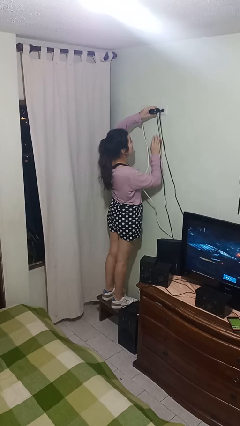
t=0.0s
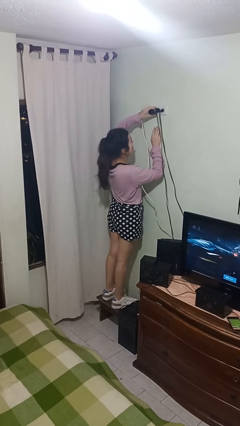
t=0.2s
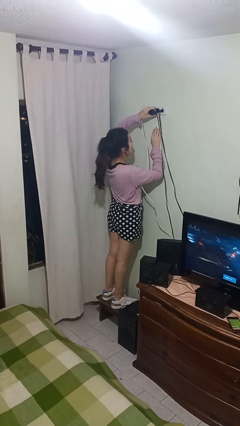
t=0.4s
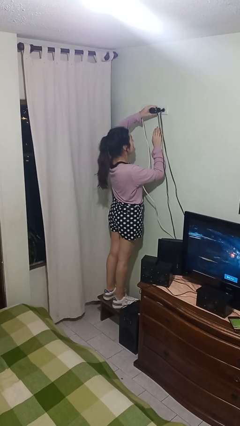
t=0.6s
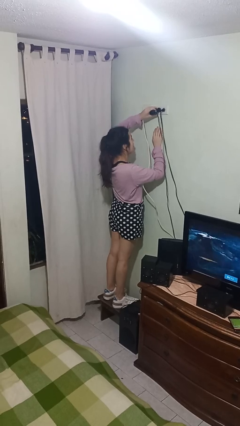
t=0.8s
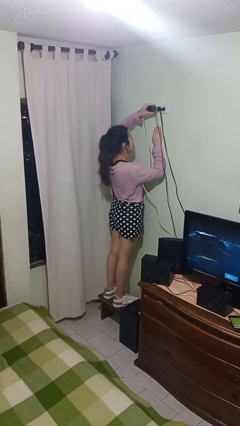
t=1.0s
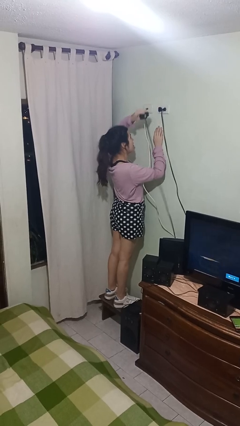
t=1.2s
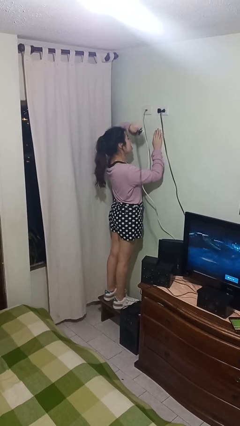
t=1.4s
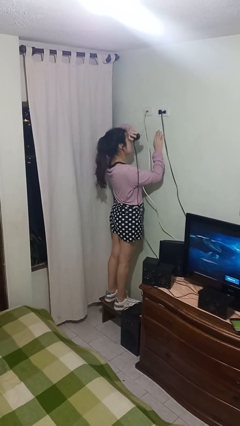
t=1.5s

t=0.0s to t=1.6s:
person unplugs from electrical socket

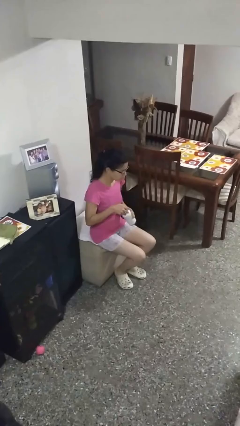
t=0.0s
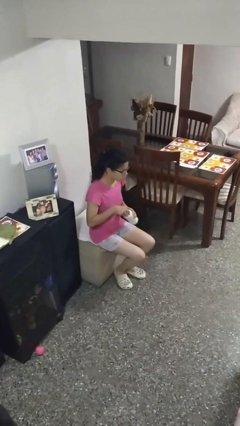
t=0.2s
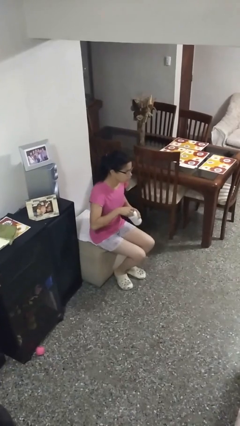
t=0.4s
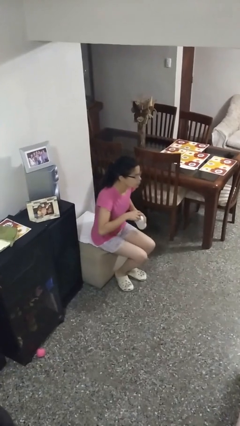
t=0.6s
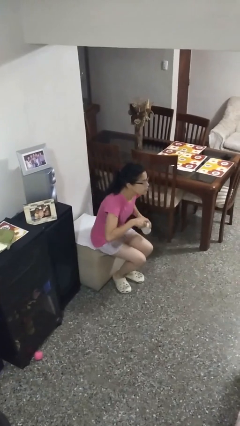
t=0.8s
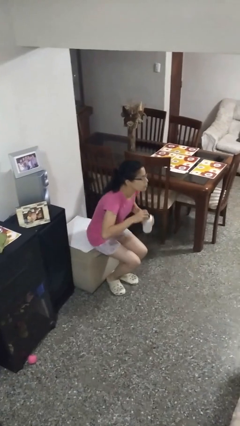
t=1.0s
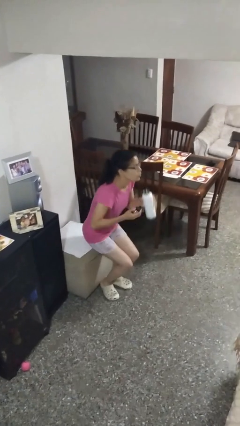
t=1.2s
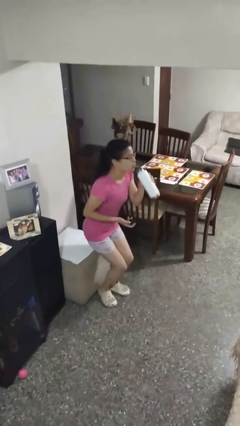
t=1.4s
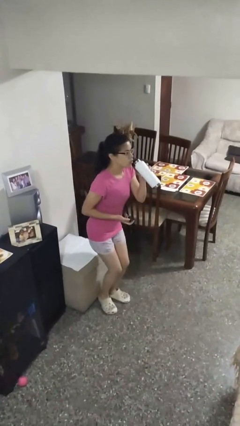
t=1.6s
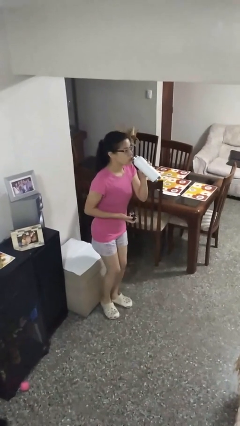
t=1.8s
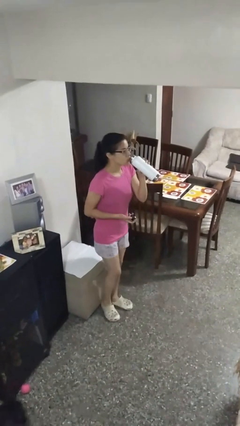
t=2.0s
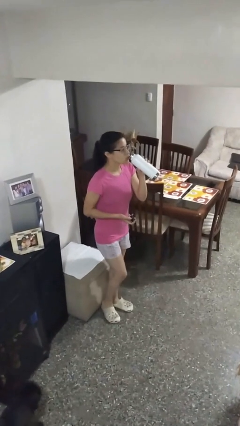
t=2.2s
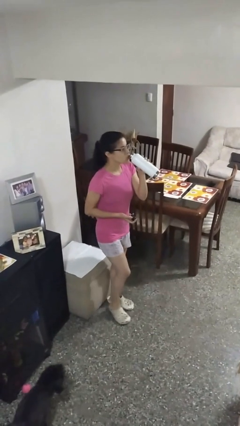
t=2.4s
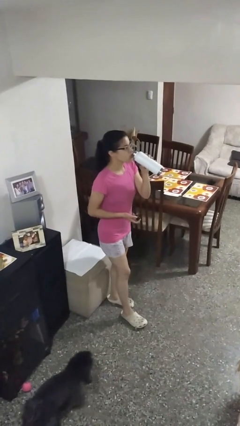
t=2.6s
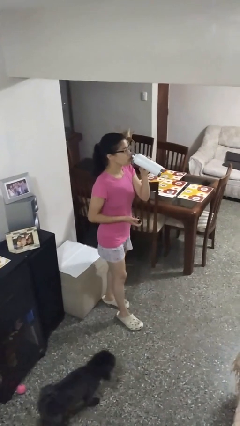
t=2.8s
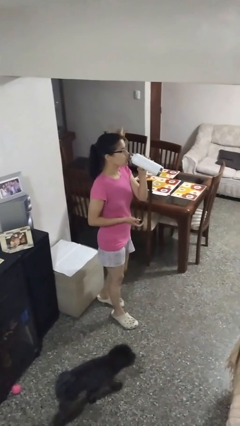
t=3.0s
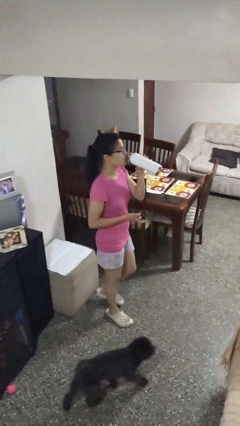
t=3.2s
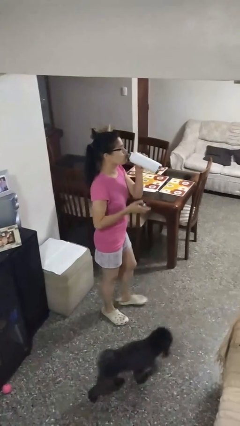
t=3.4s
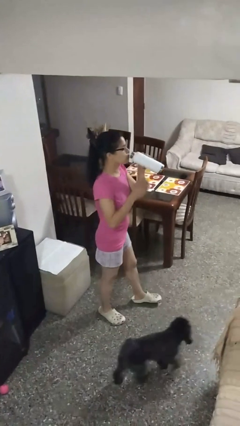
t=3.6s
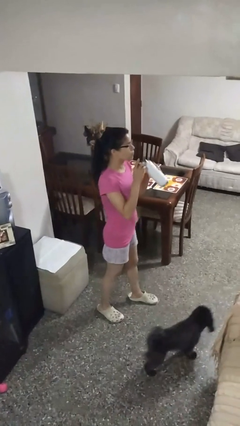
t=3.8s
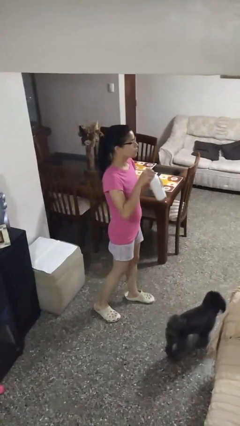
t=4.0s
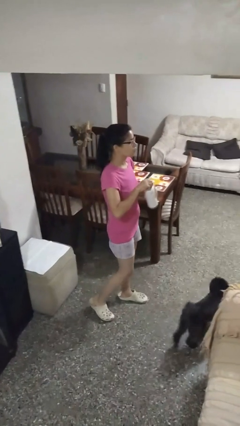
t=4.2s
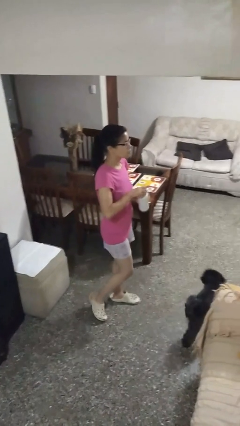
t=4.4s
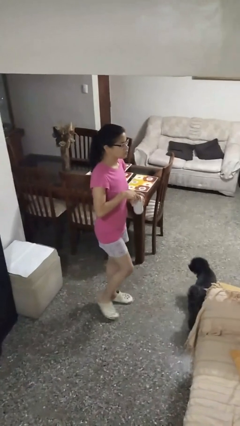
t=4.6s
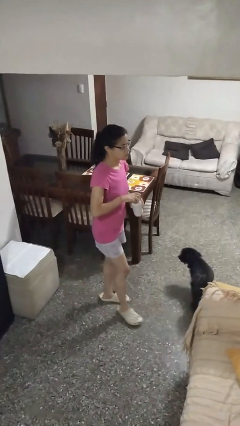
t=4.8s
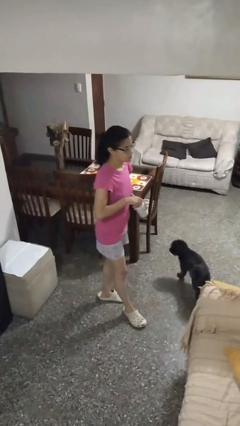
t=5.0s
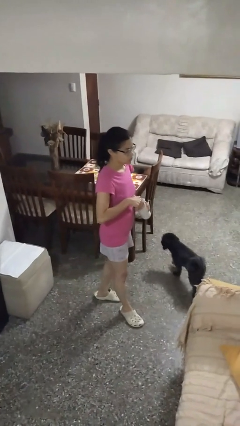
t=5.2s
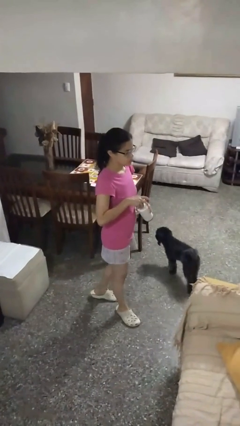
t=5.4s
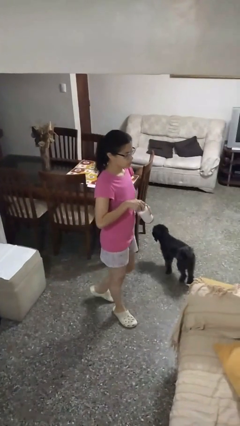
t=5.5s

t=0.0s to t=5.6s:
person drinks from bottle

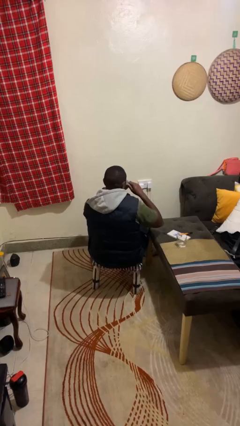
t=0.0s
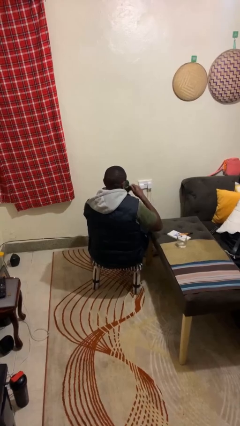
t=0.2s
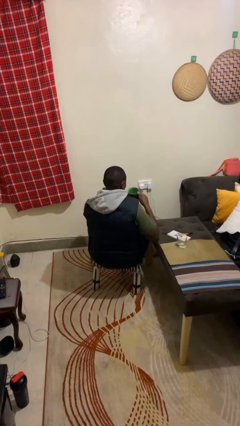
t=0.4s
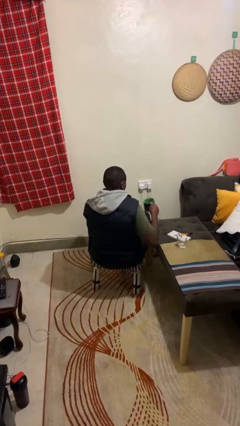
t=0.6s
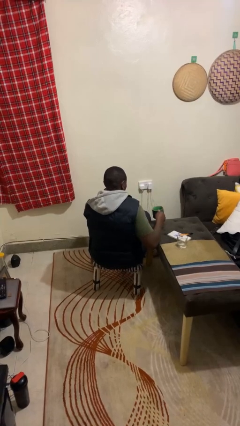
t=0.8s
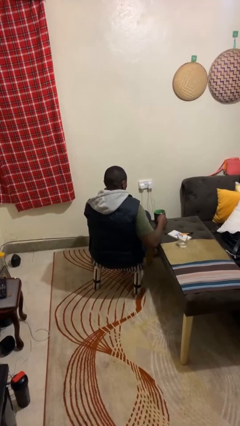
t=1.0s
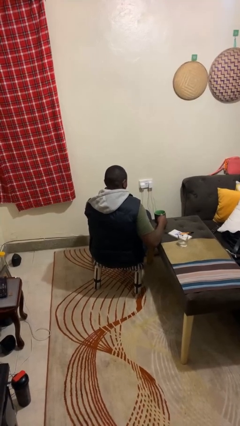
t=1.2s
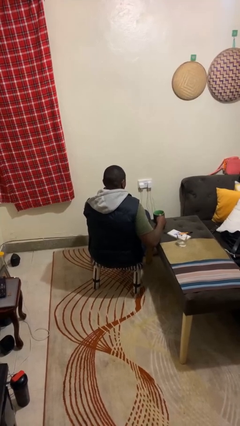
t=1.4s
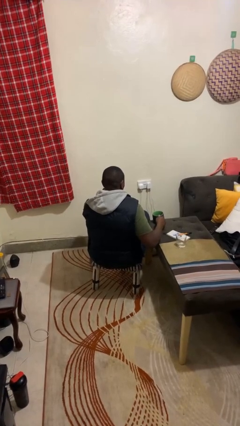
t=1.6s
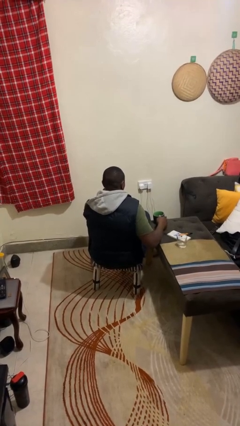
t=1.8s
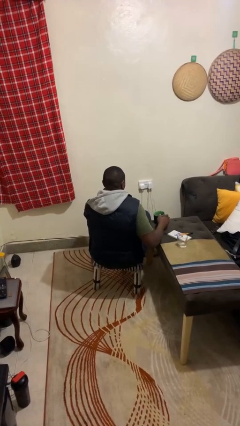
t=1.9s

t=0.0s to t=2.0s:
person puts down object on table

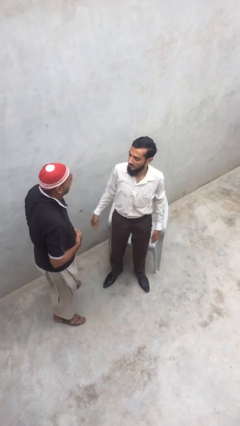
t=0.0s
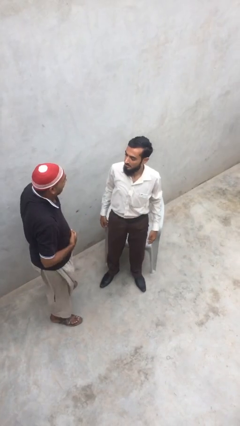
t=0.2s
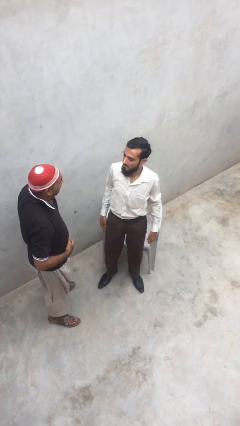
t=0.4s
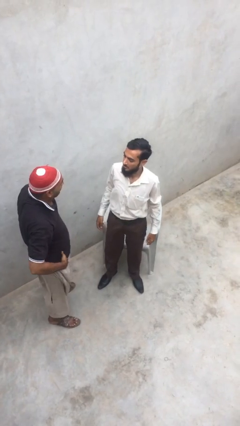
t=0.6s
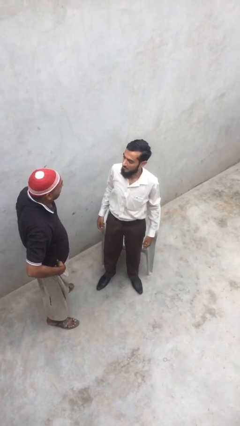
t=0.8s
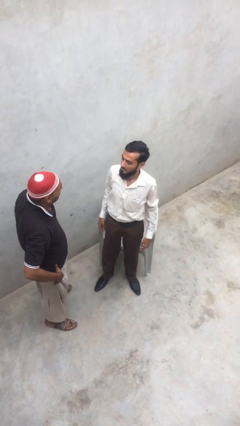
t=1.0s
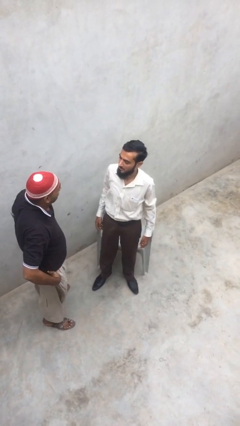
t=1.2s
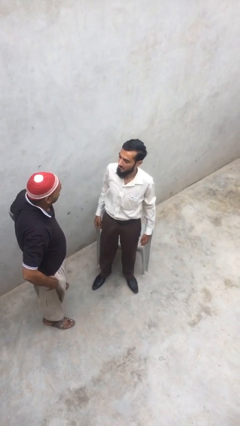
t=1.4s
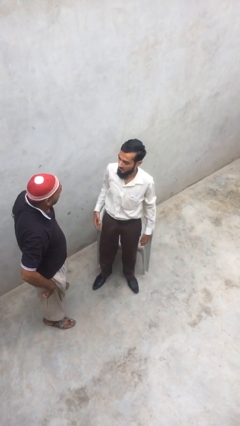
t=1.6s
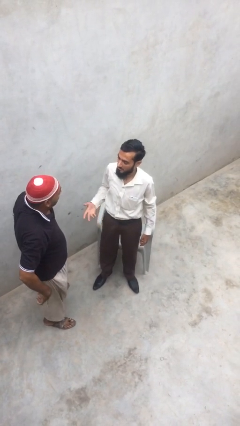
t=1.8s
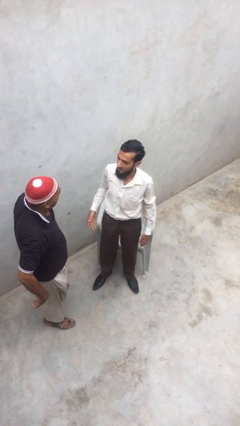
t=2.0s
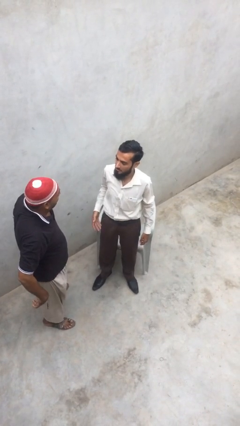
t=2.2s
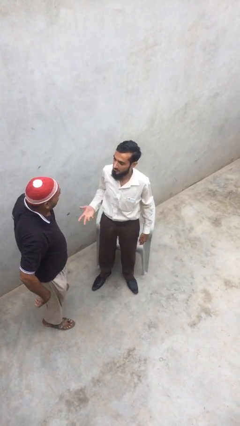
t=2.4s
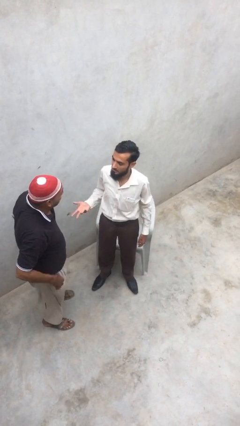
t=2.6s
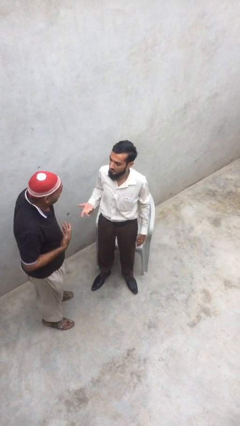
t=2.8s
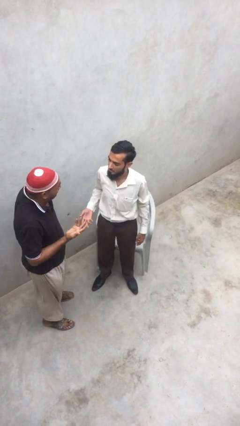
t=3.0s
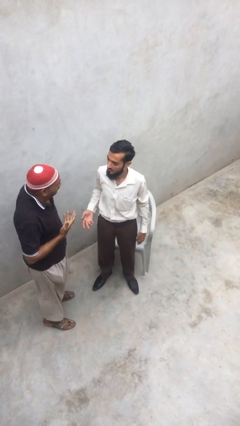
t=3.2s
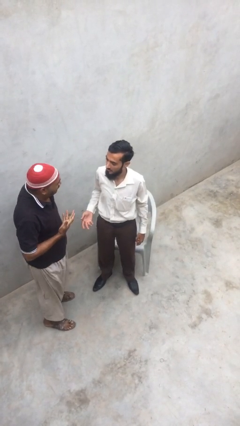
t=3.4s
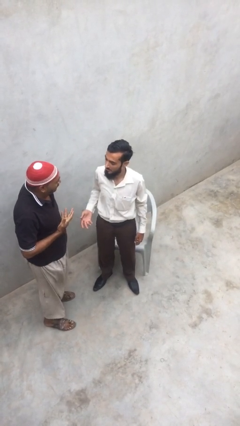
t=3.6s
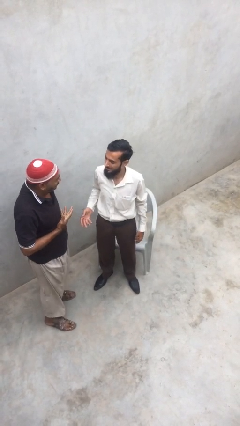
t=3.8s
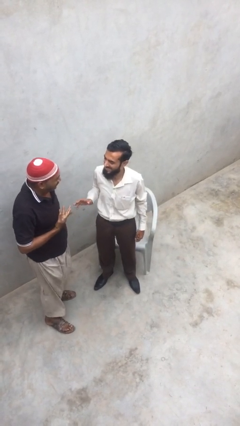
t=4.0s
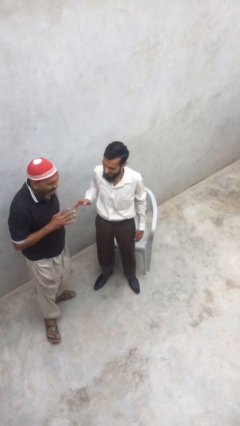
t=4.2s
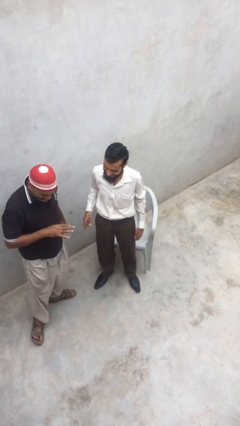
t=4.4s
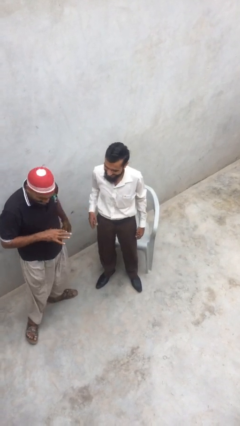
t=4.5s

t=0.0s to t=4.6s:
person talks to person

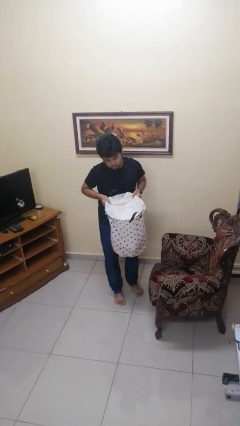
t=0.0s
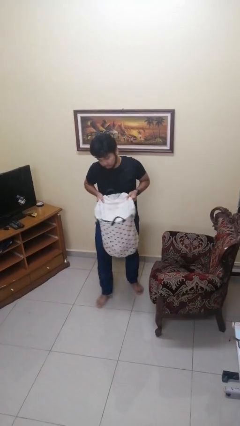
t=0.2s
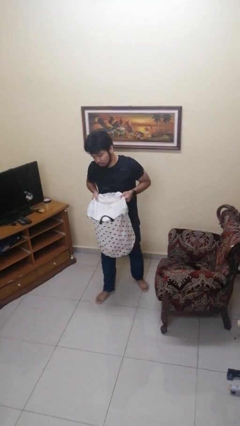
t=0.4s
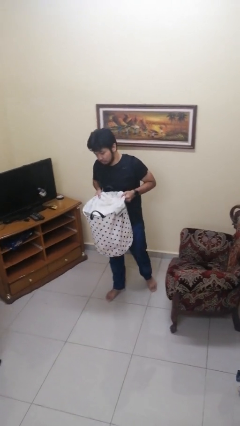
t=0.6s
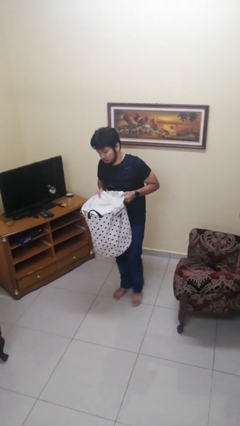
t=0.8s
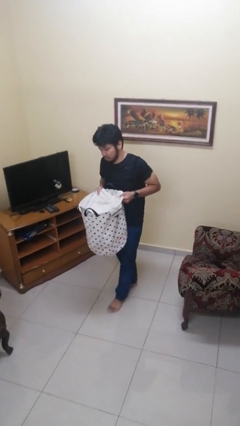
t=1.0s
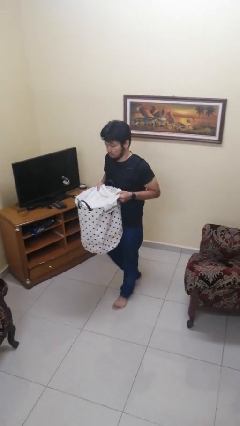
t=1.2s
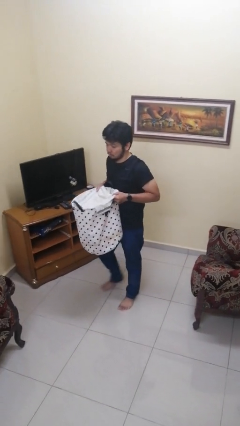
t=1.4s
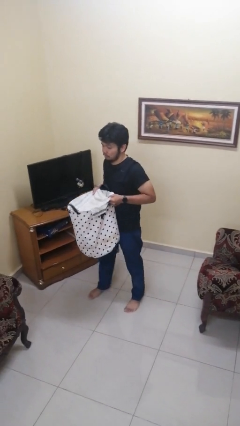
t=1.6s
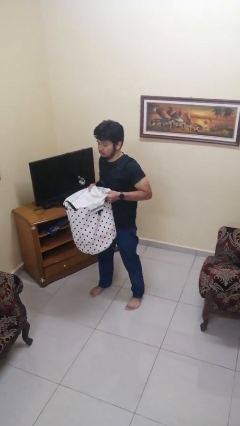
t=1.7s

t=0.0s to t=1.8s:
person carries laundry basket

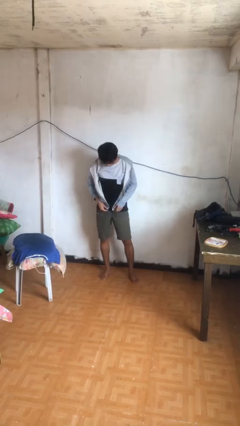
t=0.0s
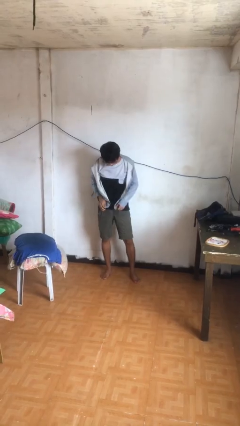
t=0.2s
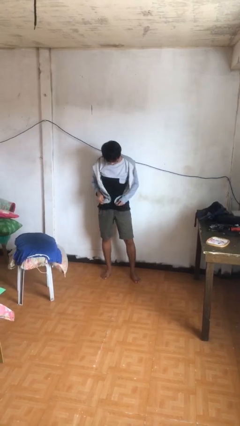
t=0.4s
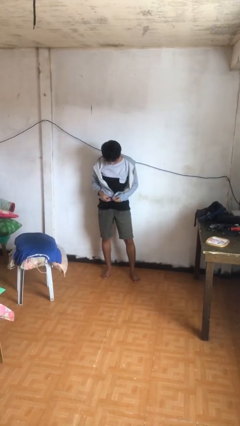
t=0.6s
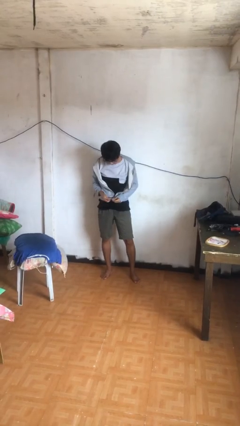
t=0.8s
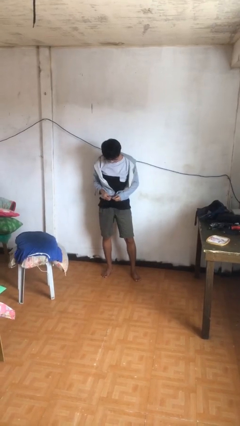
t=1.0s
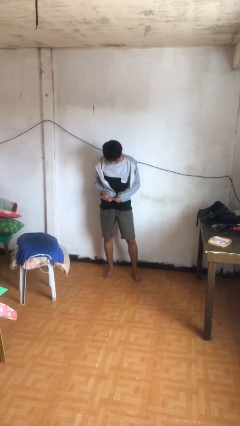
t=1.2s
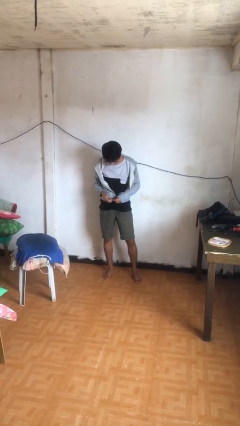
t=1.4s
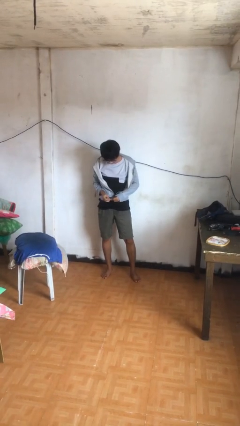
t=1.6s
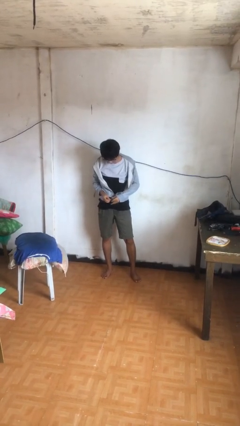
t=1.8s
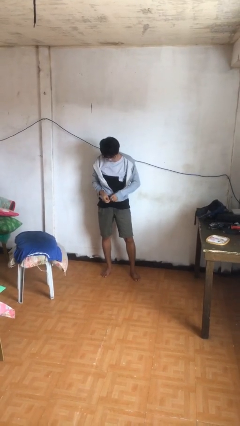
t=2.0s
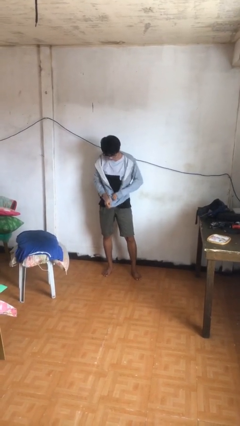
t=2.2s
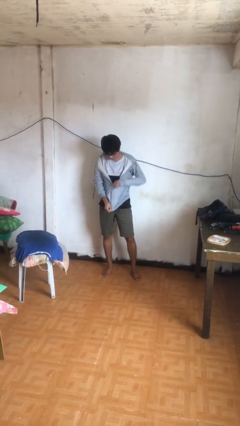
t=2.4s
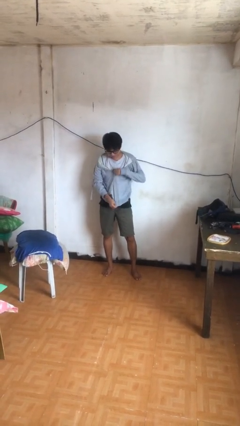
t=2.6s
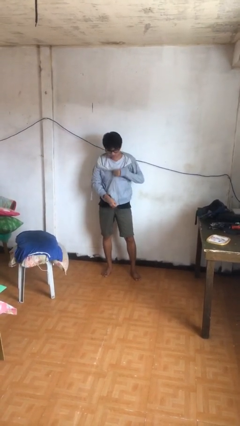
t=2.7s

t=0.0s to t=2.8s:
person zips up jacket
